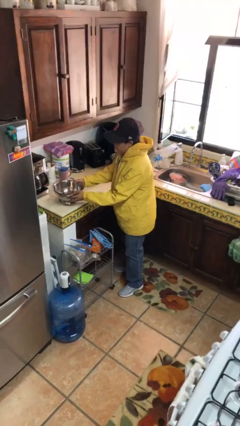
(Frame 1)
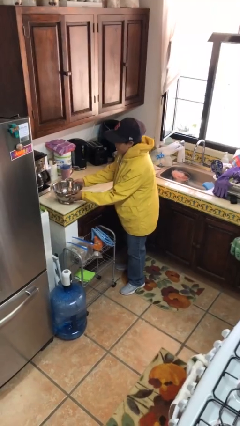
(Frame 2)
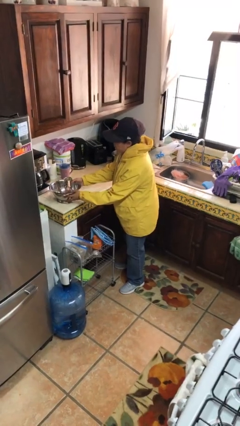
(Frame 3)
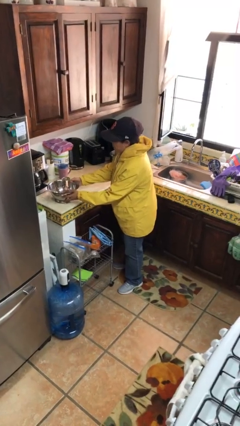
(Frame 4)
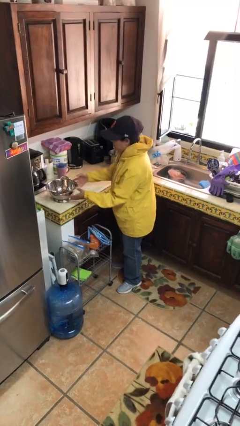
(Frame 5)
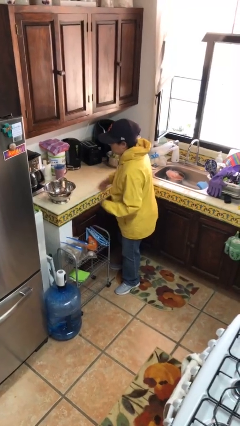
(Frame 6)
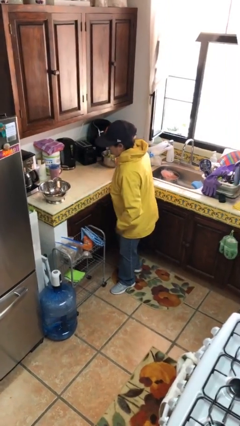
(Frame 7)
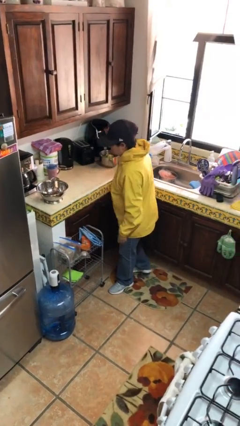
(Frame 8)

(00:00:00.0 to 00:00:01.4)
person puts down object on countertop

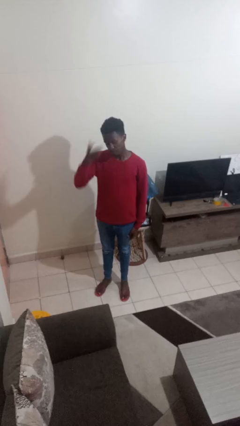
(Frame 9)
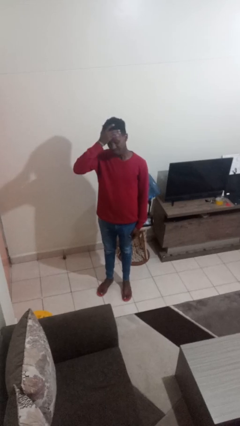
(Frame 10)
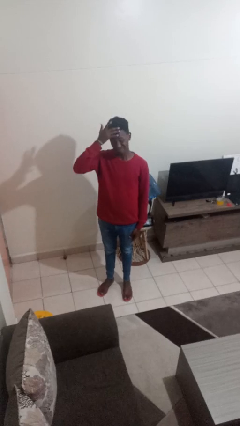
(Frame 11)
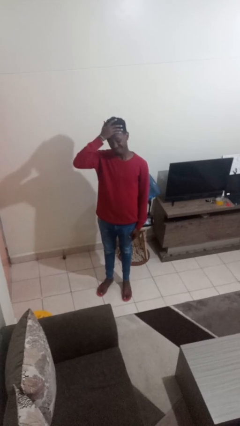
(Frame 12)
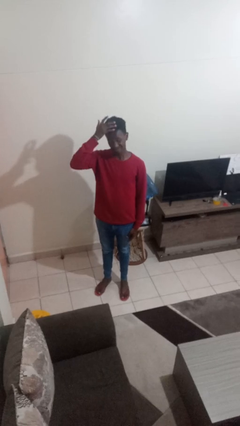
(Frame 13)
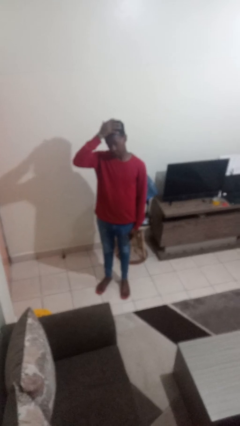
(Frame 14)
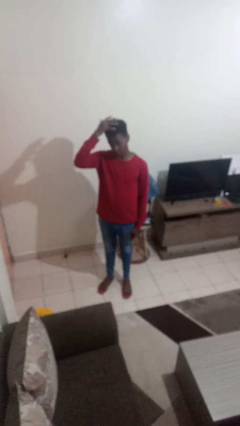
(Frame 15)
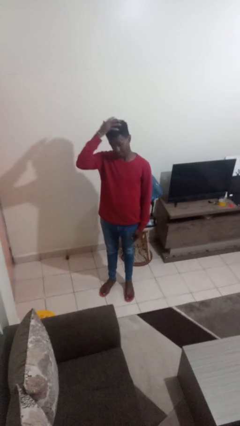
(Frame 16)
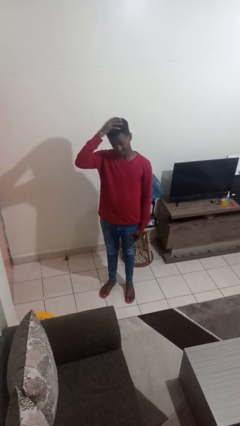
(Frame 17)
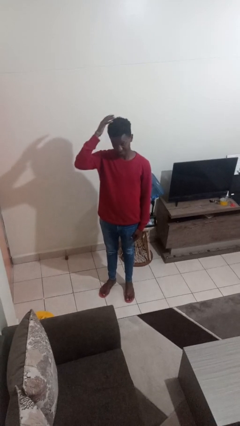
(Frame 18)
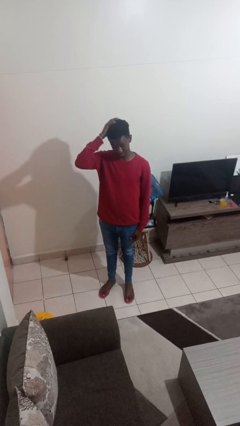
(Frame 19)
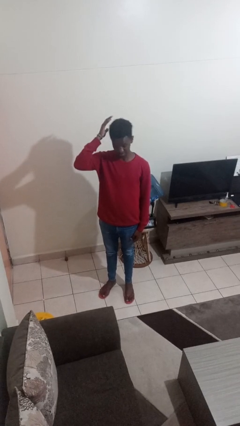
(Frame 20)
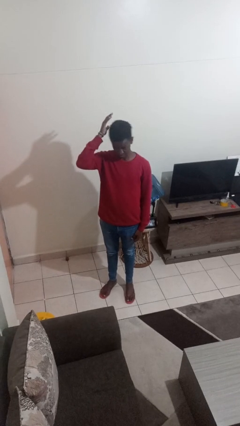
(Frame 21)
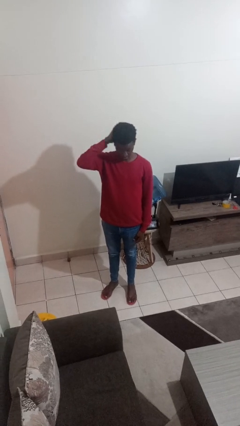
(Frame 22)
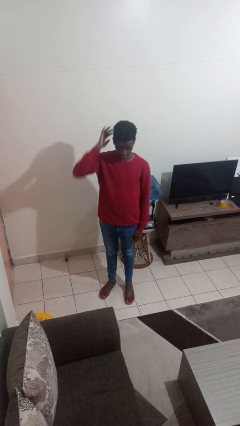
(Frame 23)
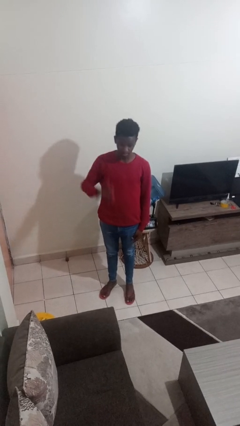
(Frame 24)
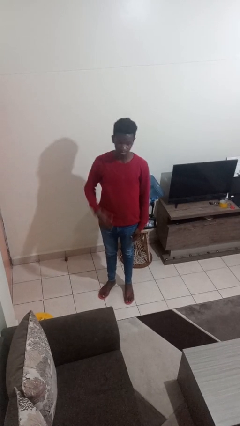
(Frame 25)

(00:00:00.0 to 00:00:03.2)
person pats head

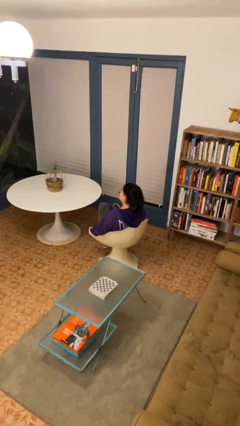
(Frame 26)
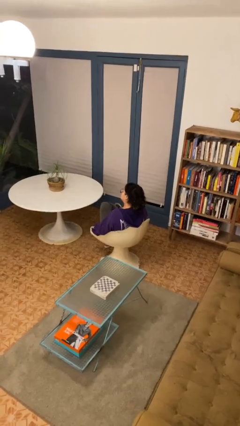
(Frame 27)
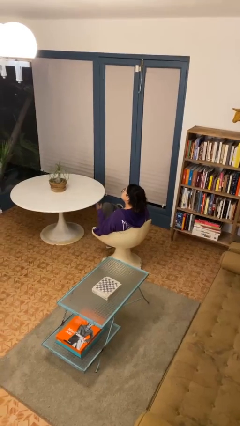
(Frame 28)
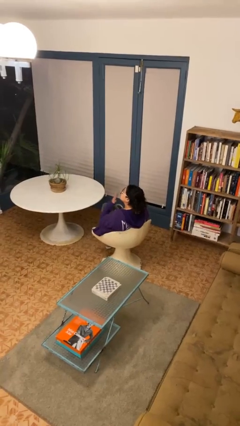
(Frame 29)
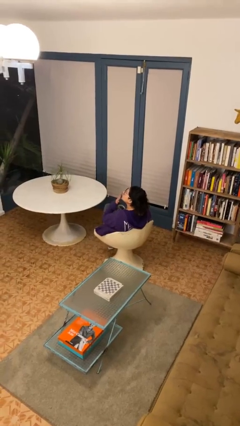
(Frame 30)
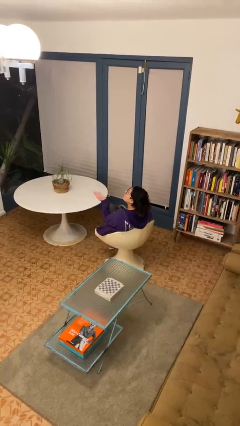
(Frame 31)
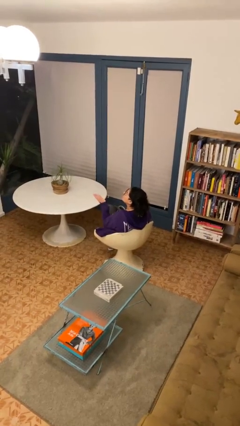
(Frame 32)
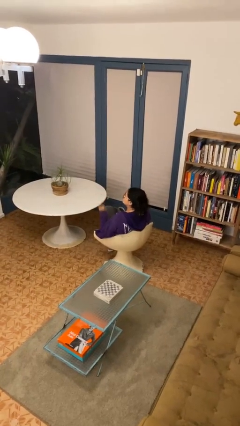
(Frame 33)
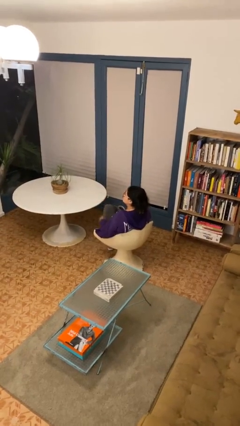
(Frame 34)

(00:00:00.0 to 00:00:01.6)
person gestures blow kiss

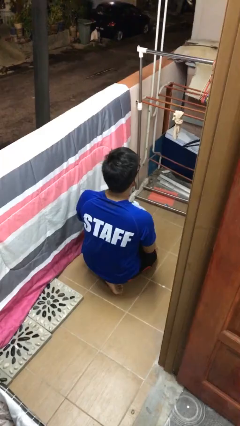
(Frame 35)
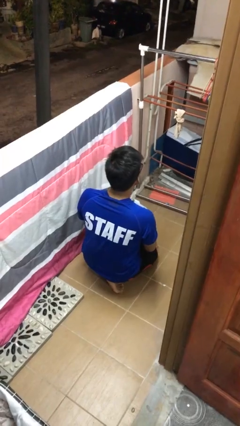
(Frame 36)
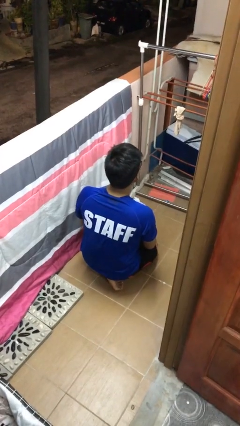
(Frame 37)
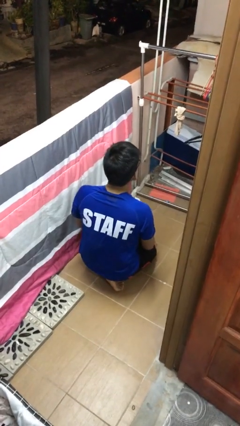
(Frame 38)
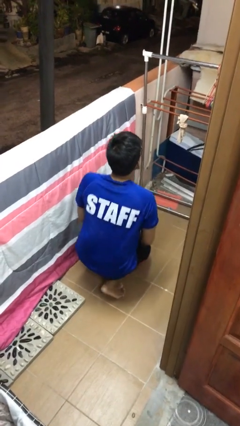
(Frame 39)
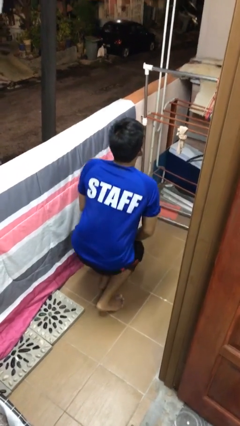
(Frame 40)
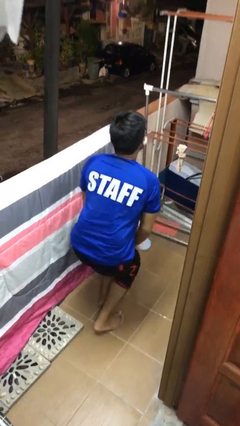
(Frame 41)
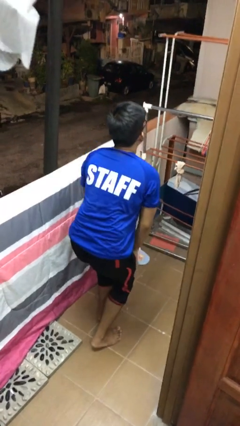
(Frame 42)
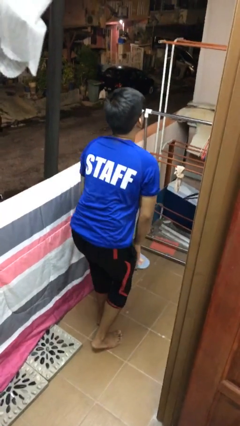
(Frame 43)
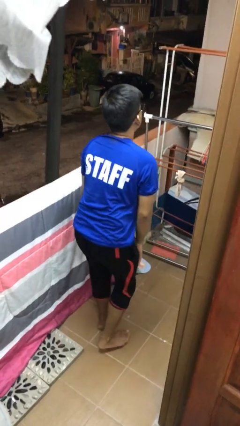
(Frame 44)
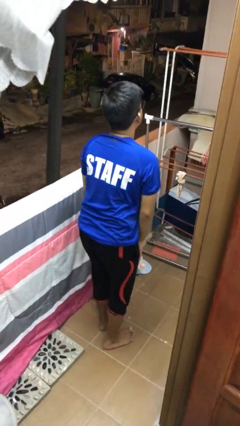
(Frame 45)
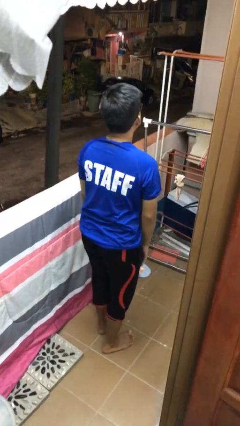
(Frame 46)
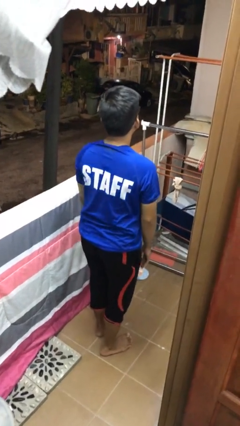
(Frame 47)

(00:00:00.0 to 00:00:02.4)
person stands up from floor

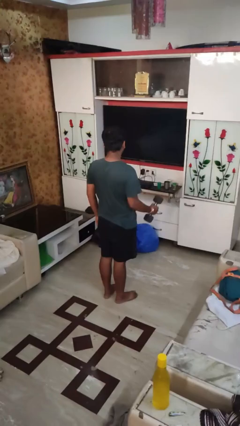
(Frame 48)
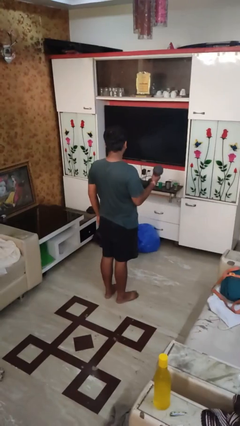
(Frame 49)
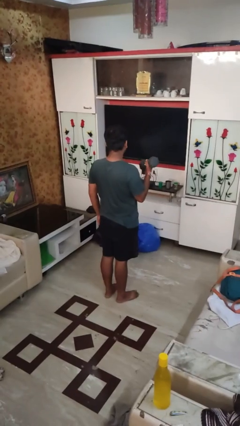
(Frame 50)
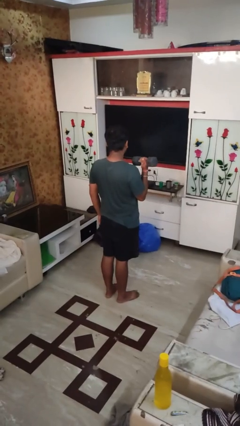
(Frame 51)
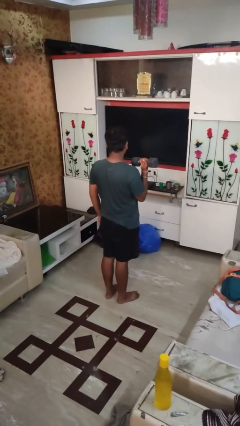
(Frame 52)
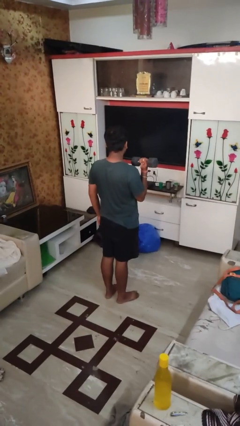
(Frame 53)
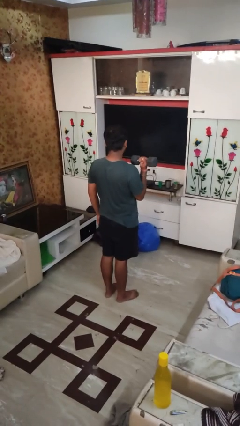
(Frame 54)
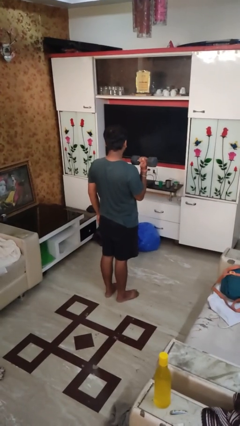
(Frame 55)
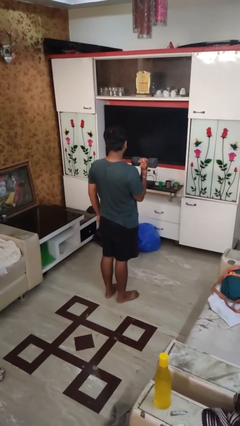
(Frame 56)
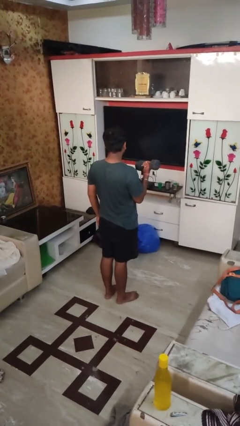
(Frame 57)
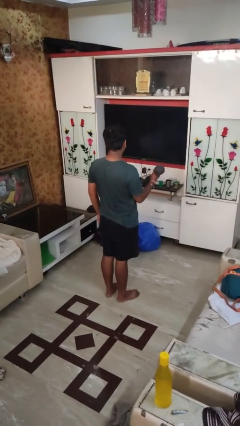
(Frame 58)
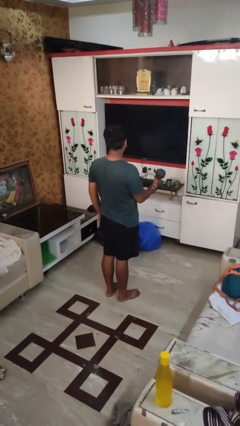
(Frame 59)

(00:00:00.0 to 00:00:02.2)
person lifts dumbbells

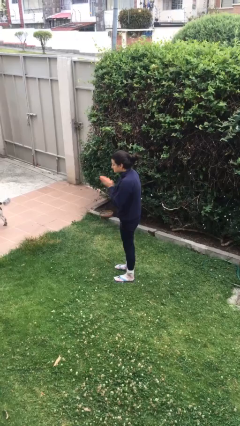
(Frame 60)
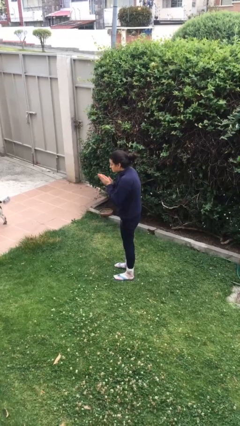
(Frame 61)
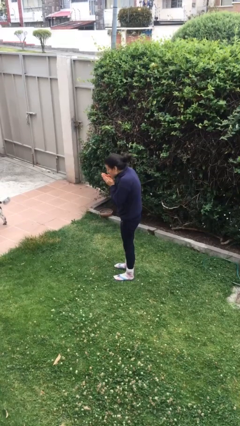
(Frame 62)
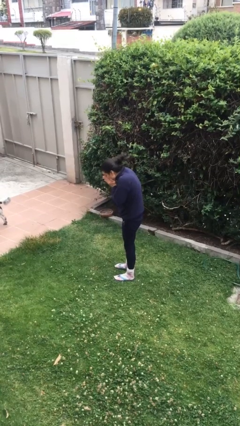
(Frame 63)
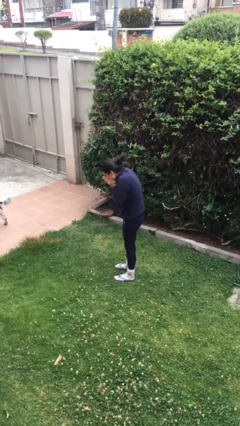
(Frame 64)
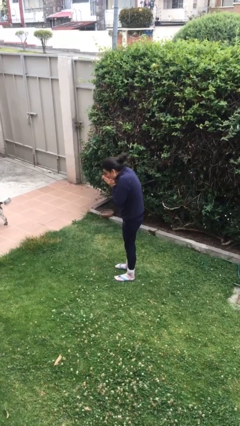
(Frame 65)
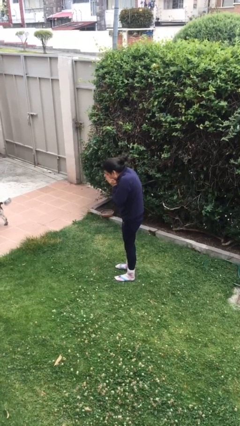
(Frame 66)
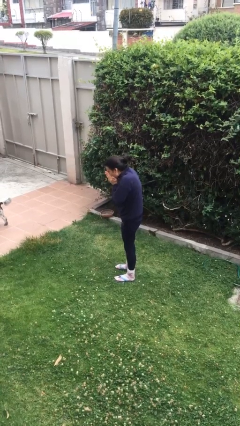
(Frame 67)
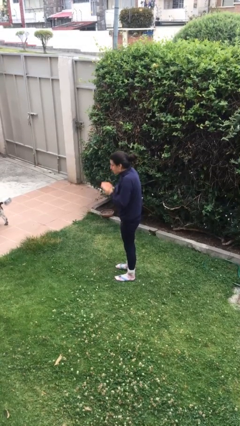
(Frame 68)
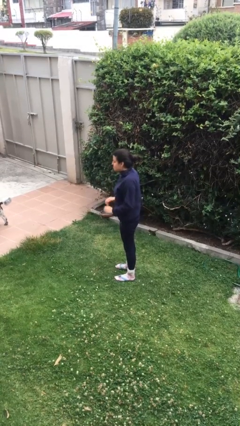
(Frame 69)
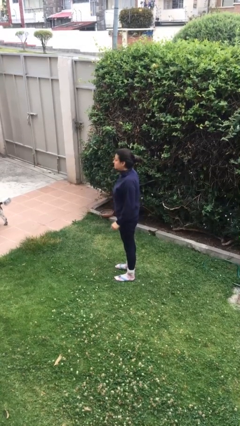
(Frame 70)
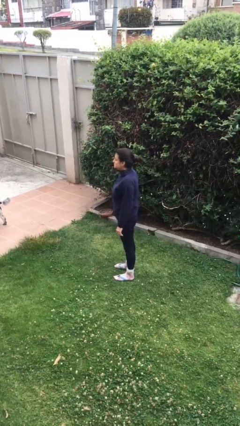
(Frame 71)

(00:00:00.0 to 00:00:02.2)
person blows into hands

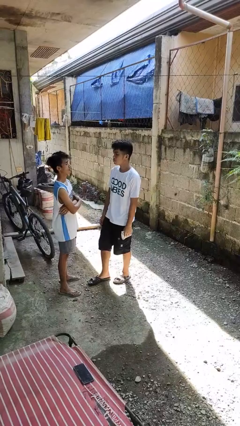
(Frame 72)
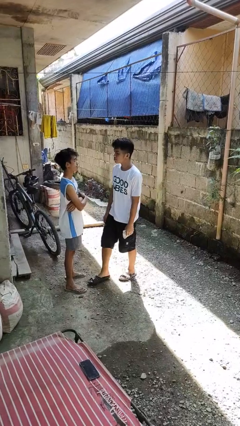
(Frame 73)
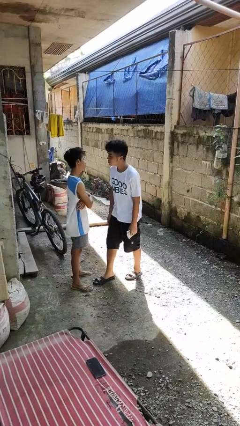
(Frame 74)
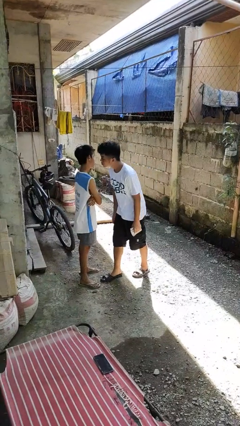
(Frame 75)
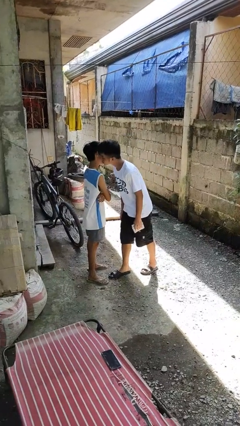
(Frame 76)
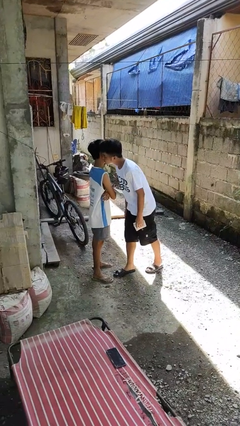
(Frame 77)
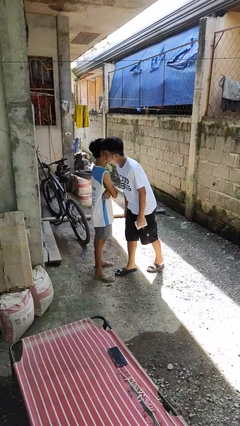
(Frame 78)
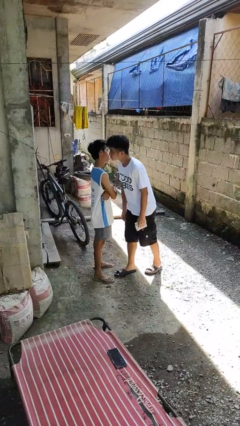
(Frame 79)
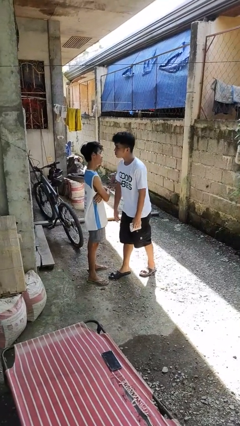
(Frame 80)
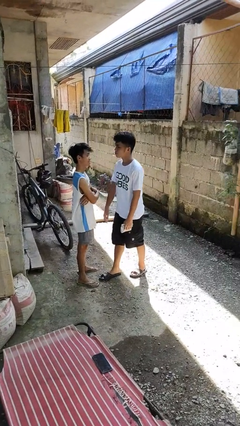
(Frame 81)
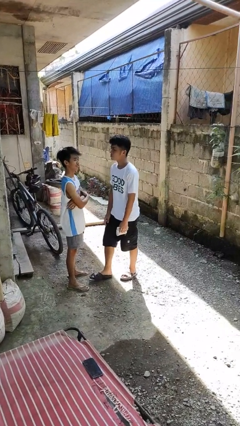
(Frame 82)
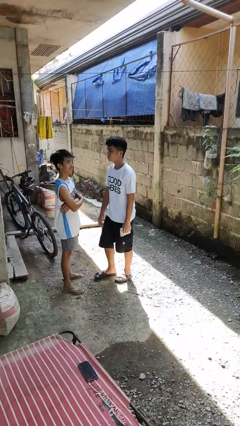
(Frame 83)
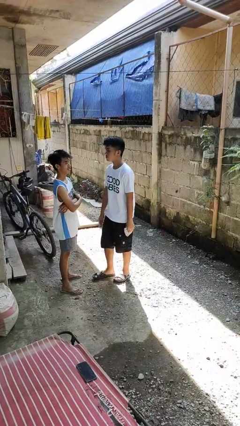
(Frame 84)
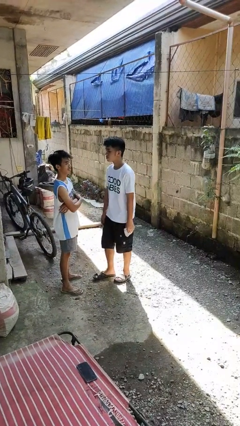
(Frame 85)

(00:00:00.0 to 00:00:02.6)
person kisses cheek of person

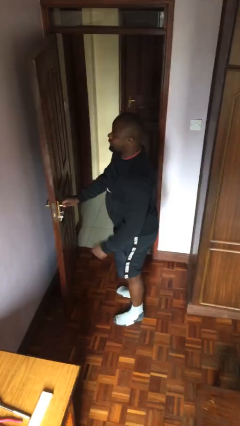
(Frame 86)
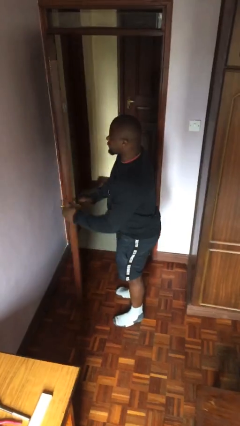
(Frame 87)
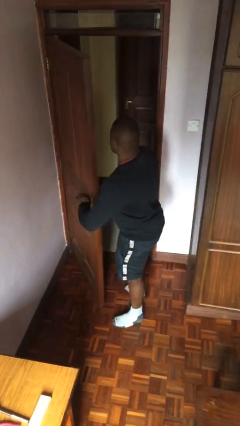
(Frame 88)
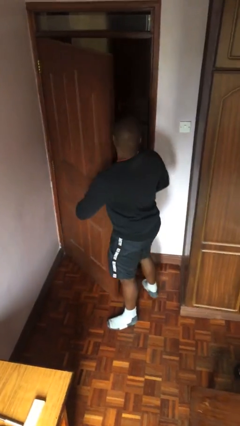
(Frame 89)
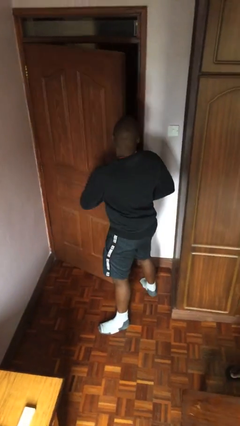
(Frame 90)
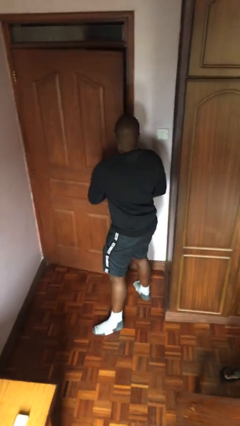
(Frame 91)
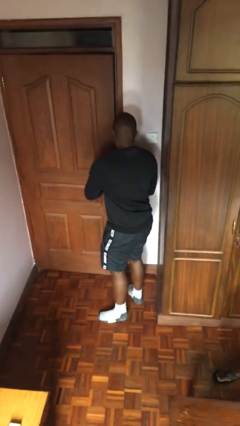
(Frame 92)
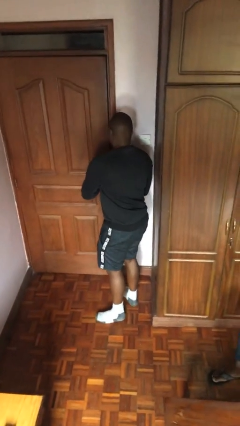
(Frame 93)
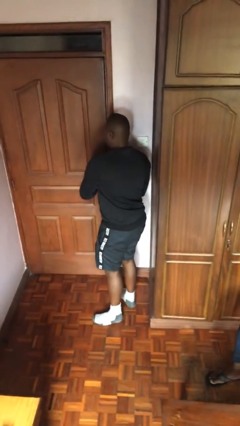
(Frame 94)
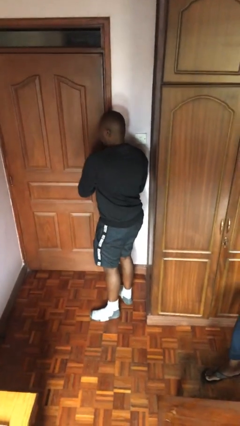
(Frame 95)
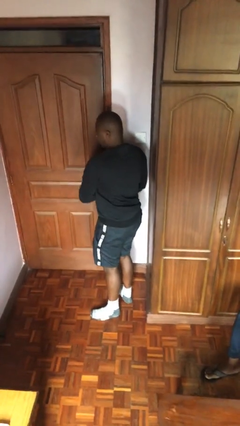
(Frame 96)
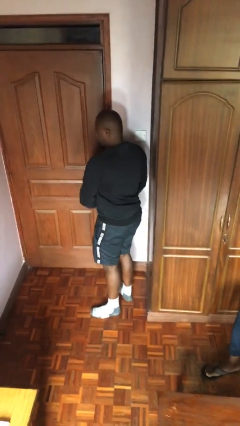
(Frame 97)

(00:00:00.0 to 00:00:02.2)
person closes facility door
